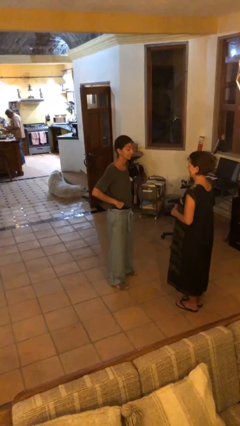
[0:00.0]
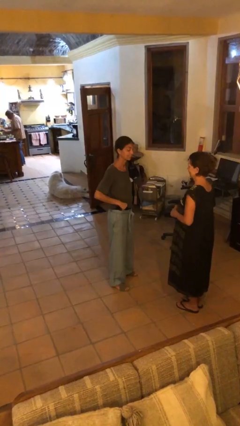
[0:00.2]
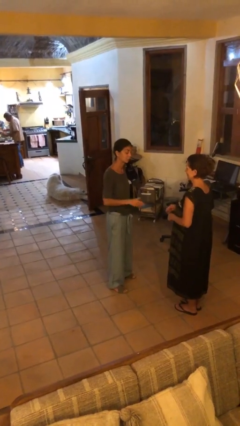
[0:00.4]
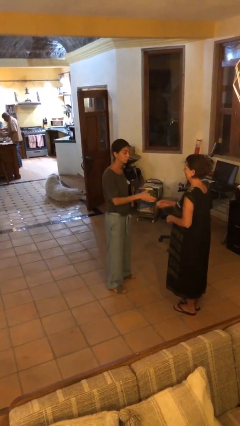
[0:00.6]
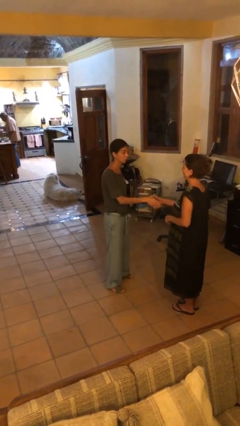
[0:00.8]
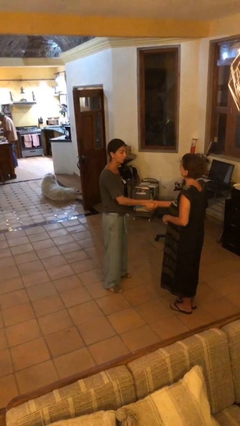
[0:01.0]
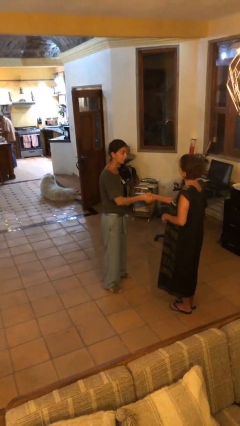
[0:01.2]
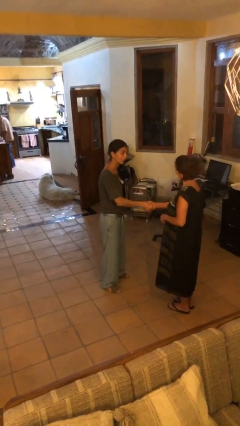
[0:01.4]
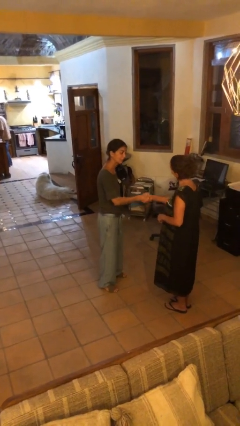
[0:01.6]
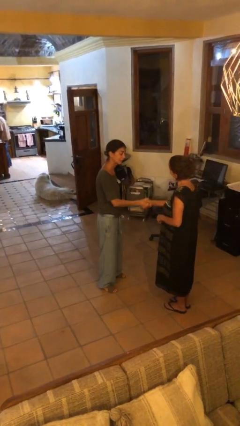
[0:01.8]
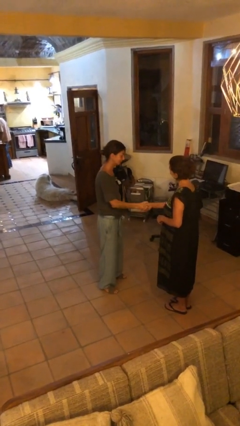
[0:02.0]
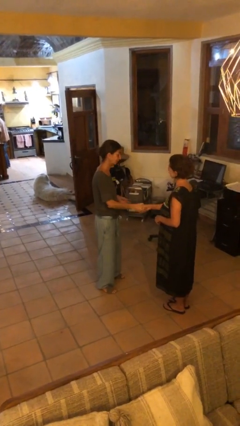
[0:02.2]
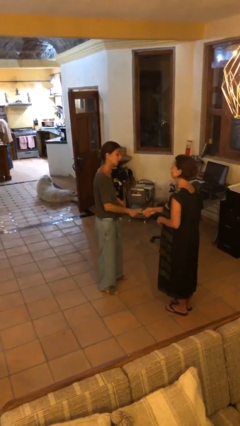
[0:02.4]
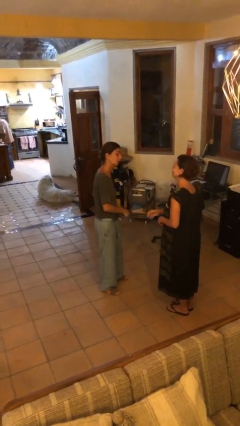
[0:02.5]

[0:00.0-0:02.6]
person shakes hand

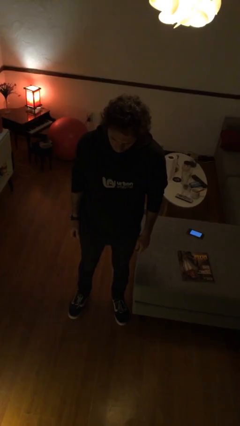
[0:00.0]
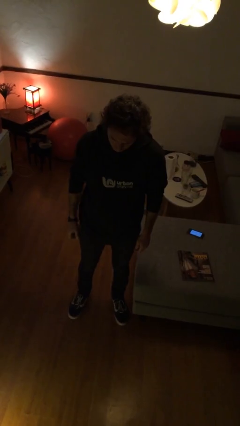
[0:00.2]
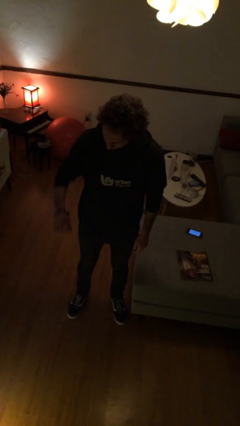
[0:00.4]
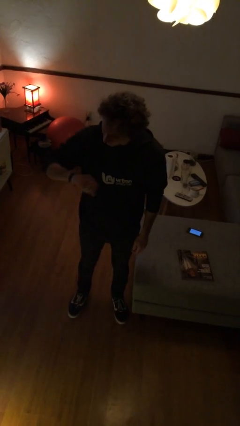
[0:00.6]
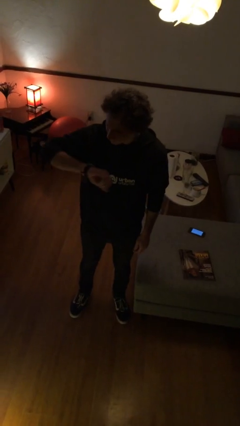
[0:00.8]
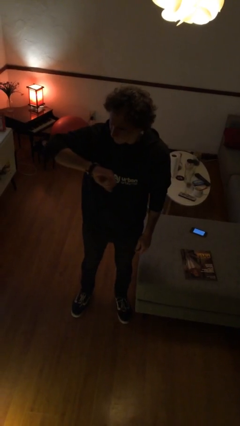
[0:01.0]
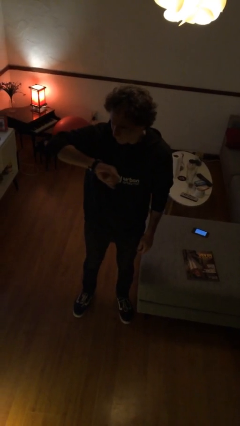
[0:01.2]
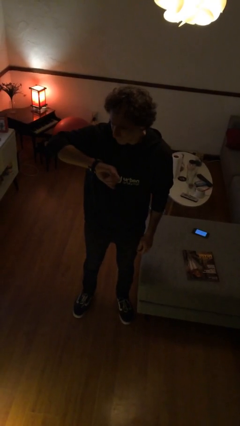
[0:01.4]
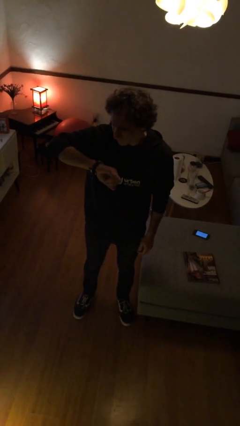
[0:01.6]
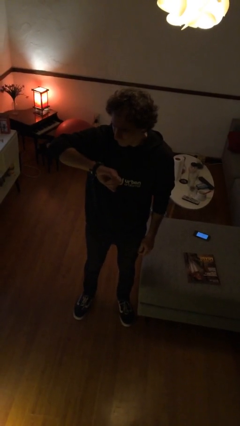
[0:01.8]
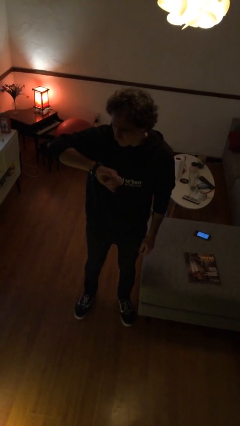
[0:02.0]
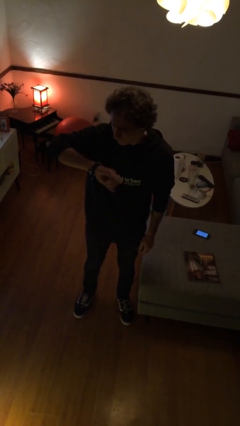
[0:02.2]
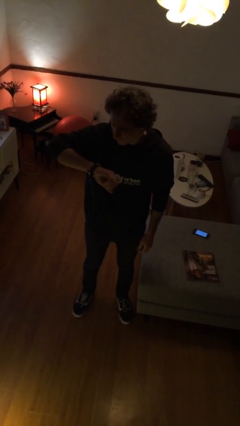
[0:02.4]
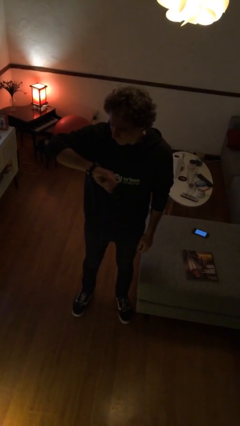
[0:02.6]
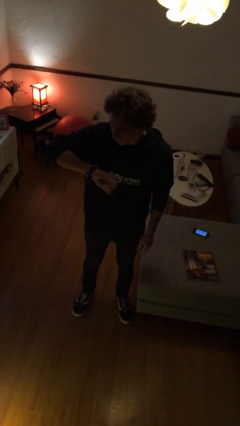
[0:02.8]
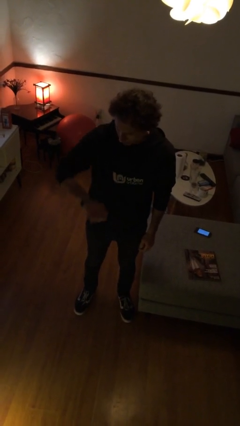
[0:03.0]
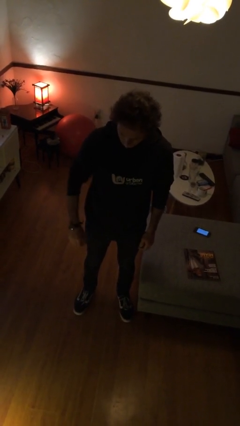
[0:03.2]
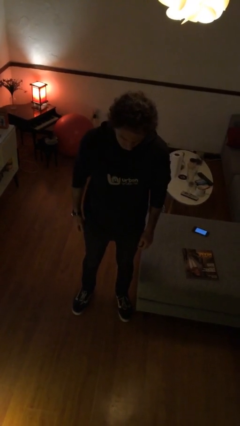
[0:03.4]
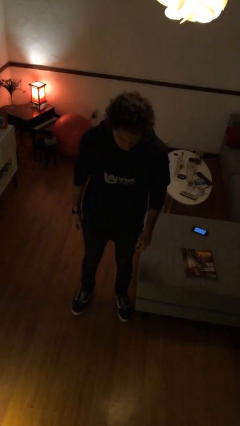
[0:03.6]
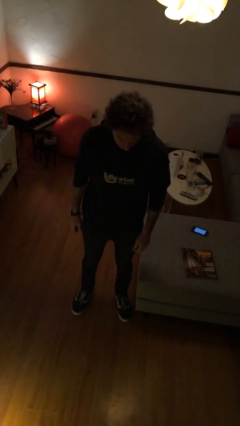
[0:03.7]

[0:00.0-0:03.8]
person looks at wristwatch

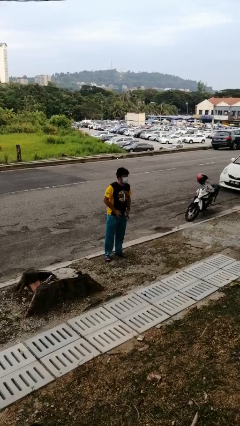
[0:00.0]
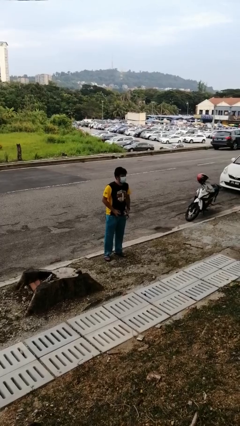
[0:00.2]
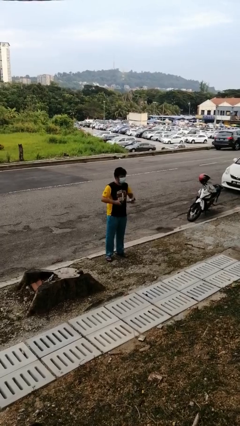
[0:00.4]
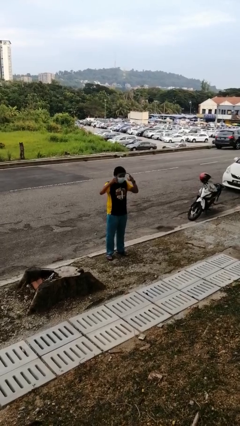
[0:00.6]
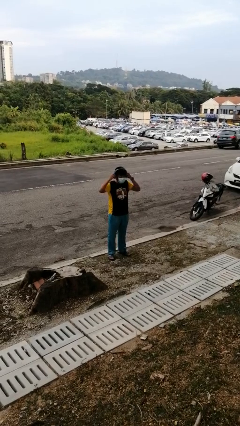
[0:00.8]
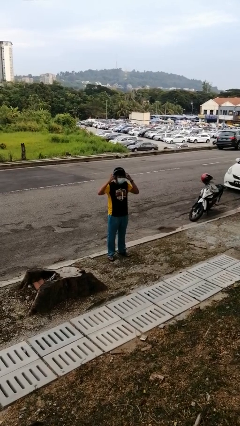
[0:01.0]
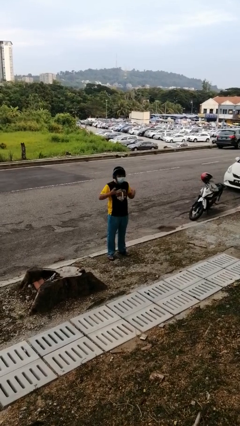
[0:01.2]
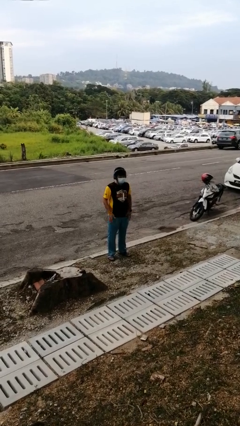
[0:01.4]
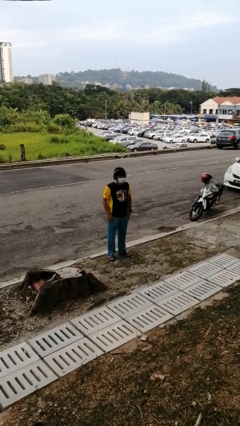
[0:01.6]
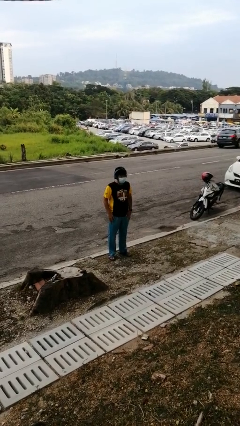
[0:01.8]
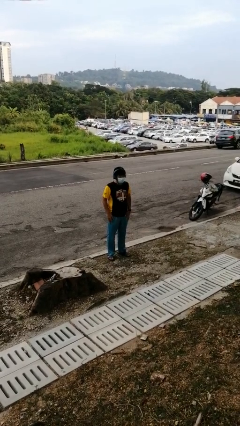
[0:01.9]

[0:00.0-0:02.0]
person puts on headphones

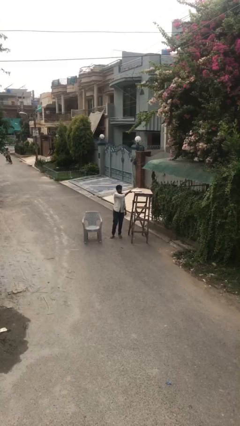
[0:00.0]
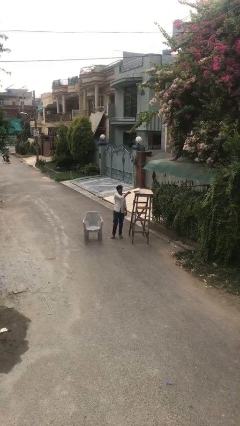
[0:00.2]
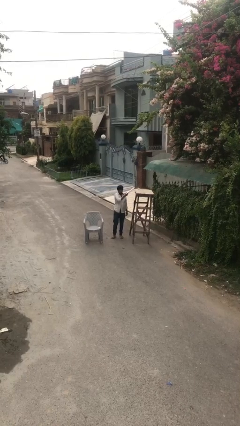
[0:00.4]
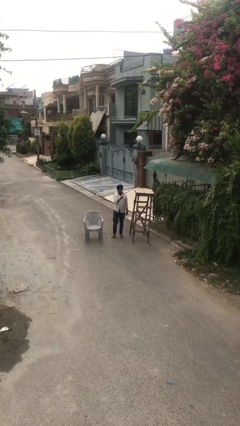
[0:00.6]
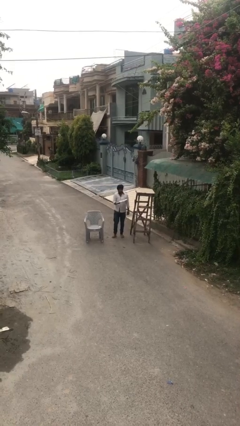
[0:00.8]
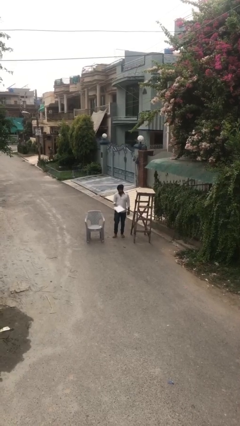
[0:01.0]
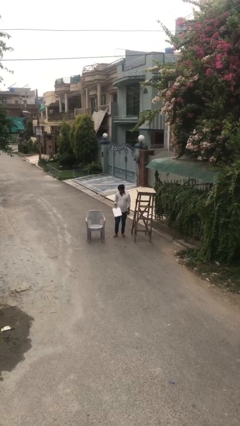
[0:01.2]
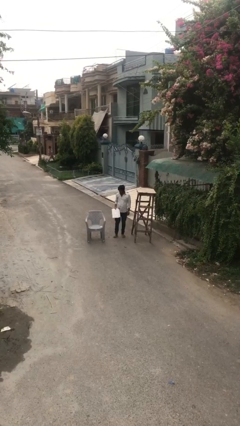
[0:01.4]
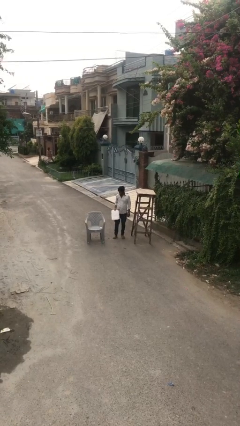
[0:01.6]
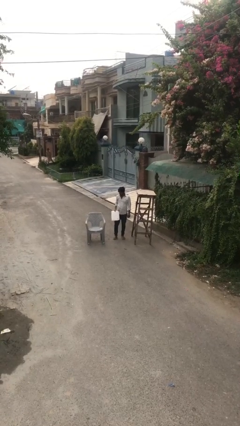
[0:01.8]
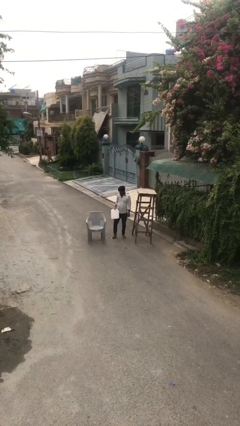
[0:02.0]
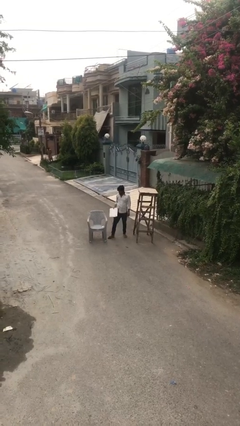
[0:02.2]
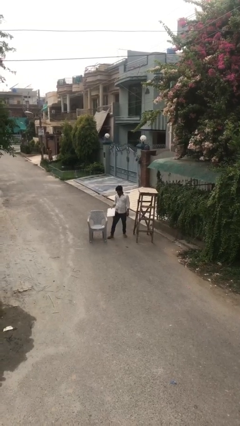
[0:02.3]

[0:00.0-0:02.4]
person picks up object from shelf

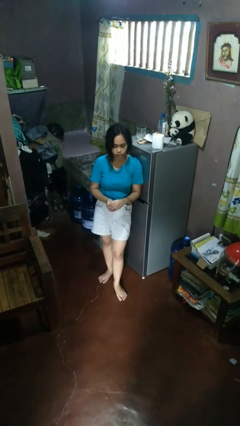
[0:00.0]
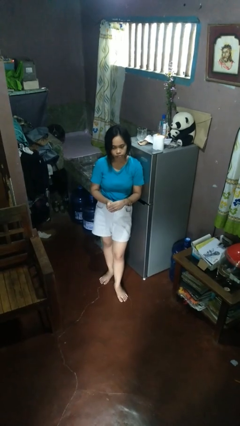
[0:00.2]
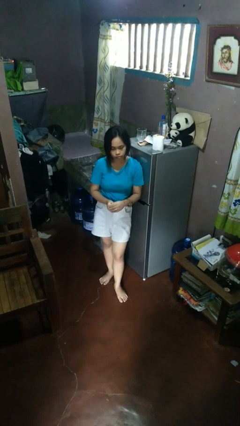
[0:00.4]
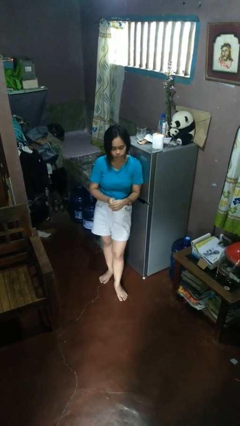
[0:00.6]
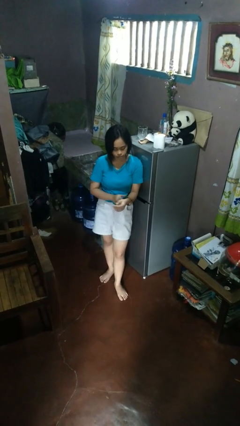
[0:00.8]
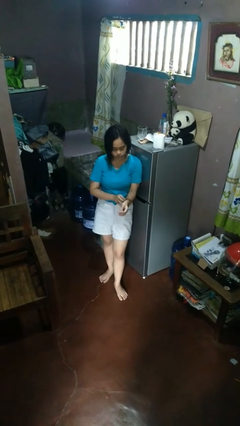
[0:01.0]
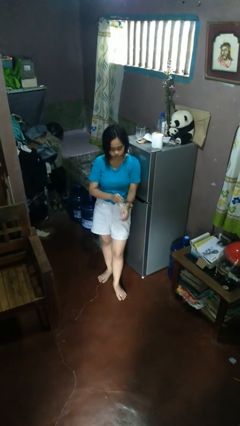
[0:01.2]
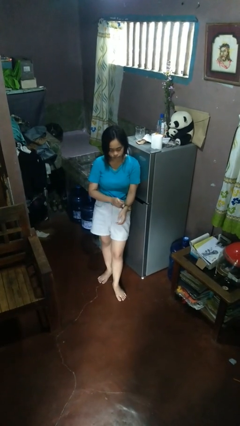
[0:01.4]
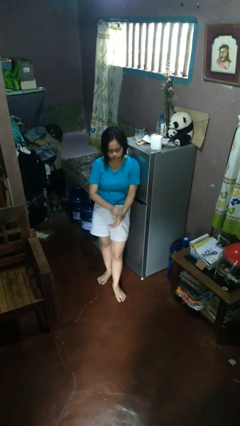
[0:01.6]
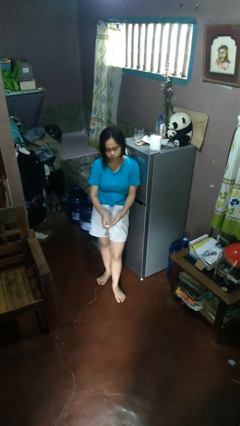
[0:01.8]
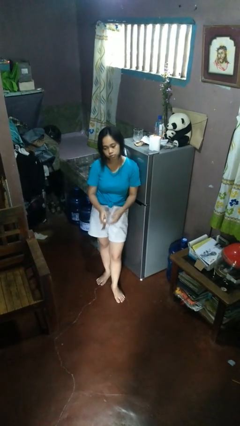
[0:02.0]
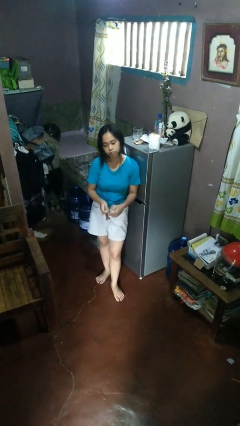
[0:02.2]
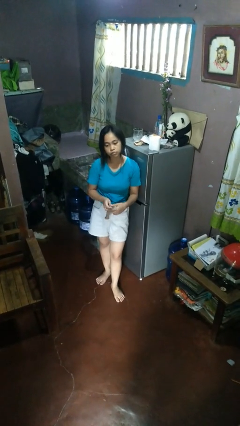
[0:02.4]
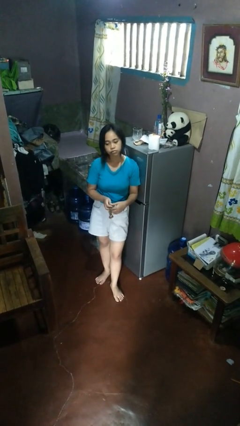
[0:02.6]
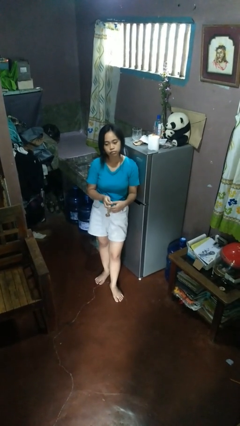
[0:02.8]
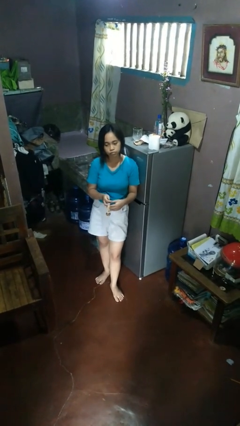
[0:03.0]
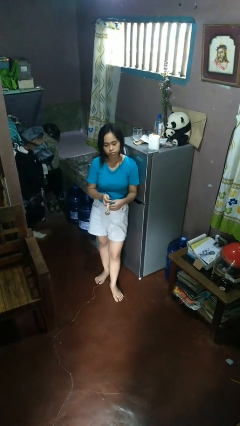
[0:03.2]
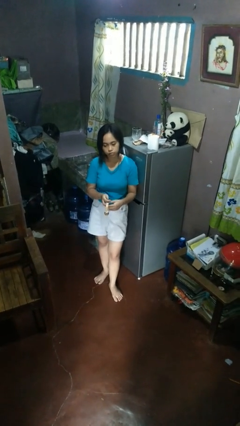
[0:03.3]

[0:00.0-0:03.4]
person takes off wristwatch

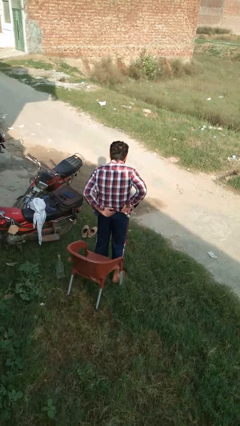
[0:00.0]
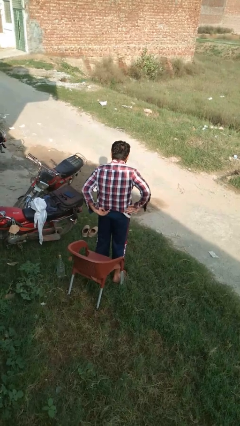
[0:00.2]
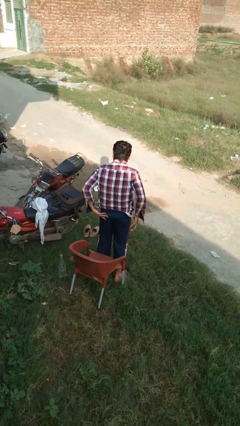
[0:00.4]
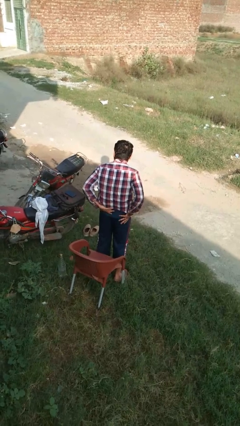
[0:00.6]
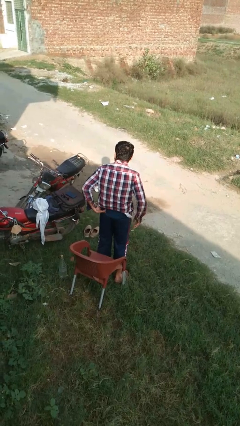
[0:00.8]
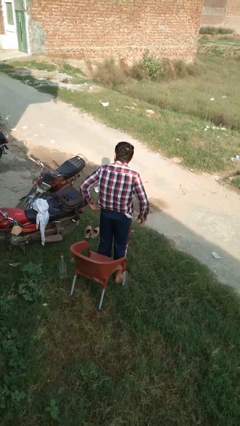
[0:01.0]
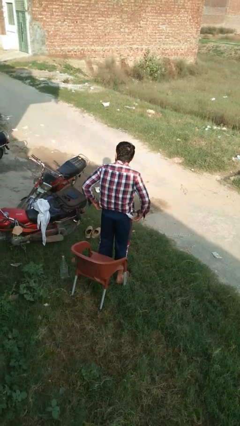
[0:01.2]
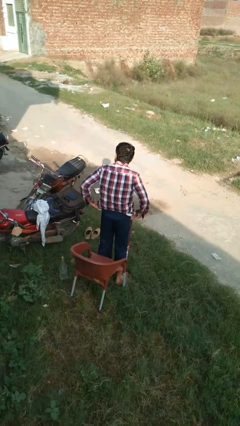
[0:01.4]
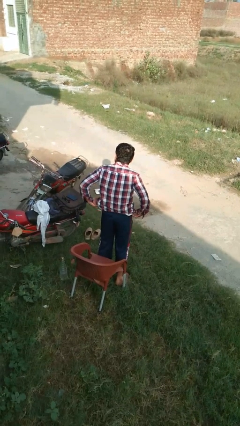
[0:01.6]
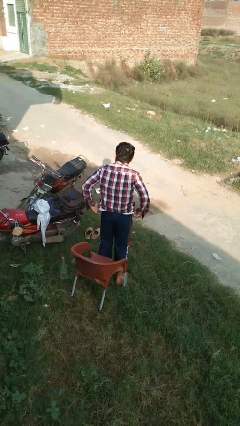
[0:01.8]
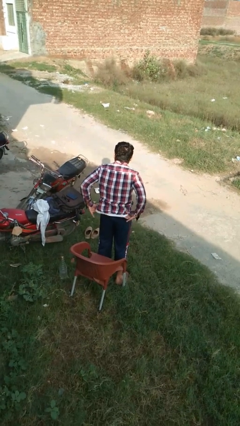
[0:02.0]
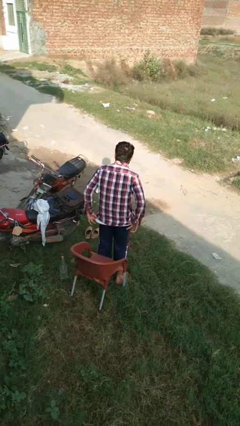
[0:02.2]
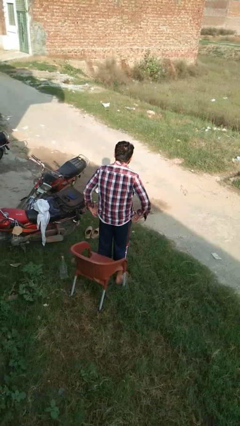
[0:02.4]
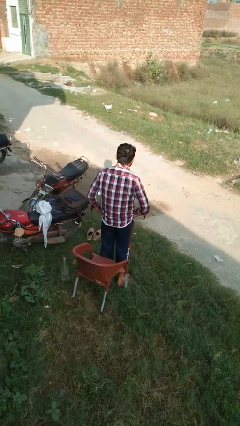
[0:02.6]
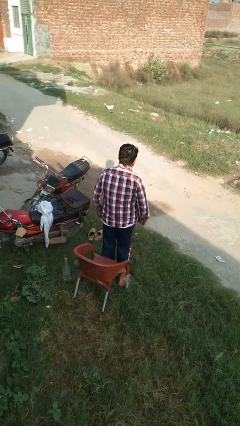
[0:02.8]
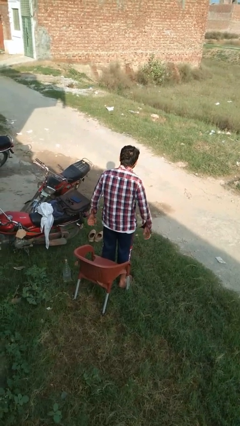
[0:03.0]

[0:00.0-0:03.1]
person untucks shirt
